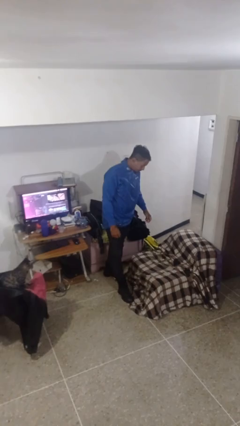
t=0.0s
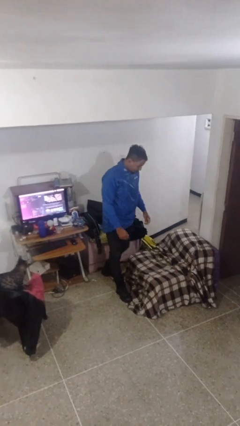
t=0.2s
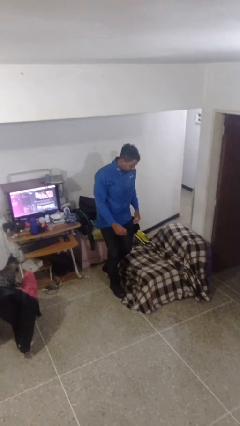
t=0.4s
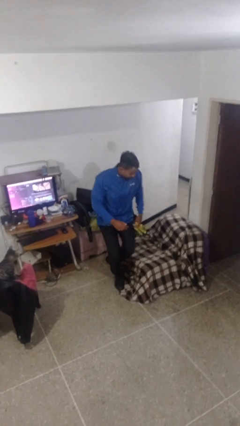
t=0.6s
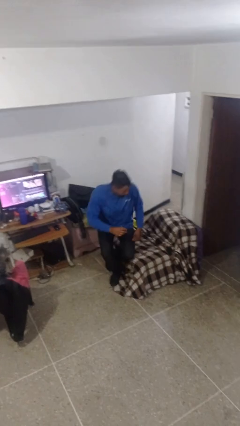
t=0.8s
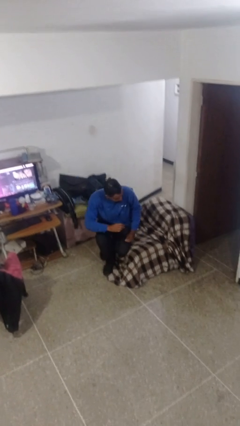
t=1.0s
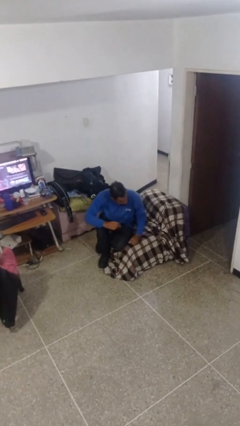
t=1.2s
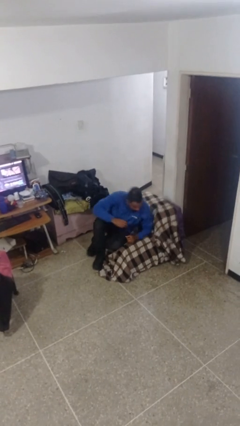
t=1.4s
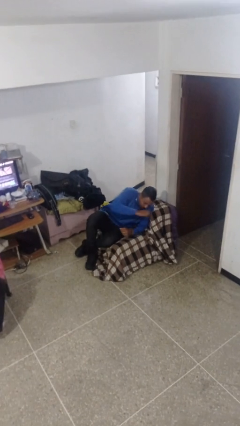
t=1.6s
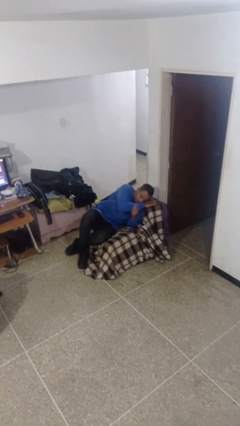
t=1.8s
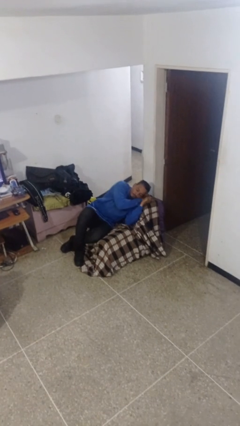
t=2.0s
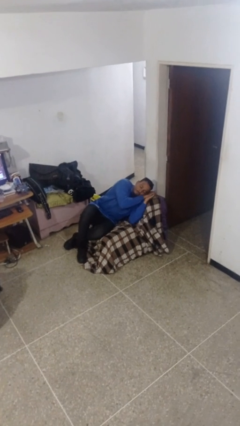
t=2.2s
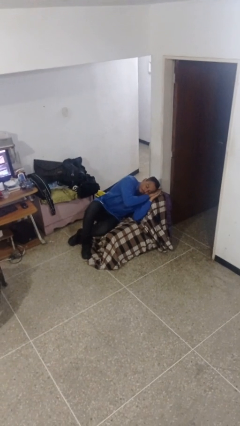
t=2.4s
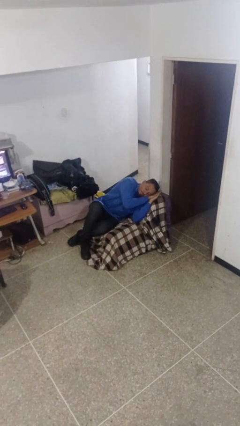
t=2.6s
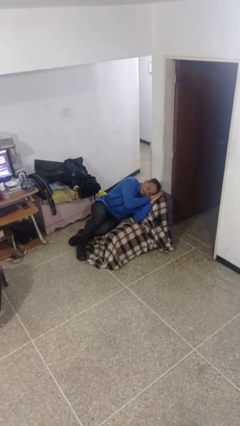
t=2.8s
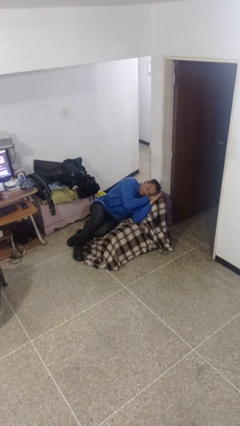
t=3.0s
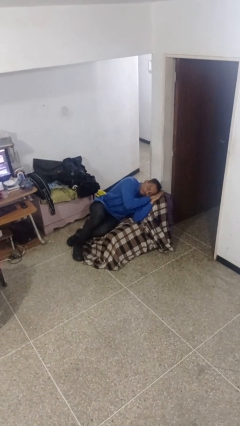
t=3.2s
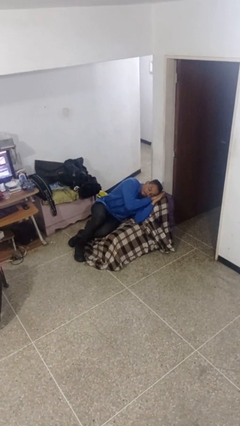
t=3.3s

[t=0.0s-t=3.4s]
person lies down on couch

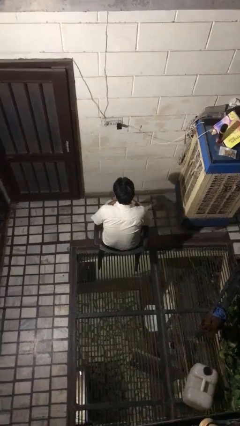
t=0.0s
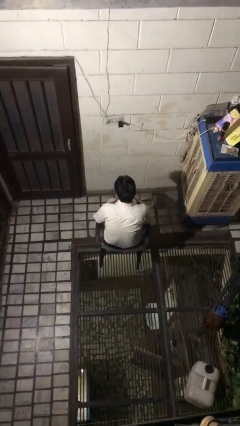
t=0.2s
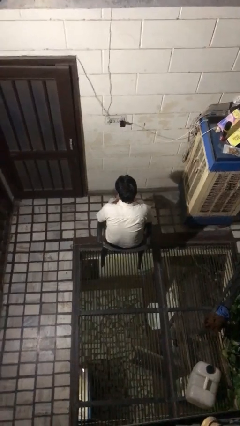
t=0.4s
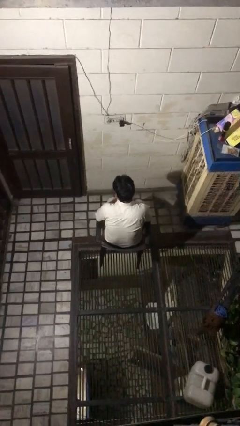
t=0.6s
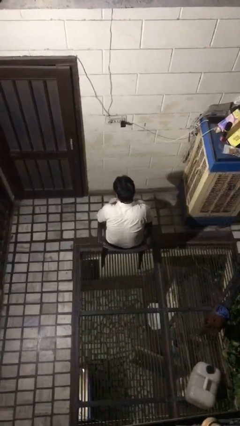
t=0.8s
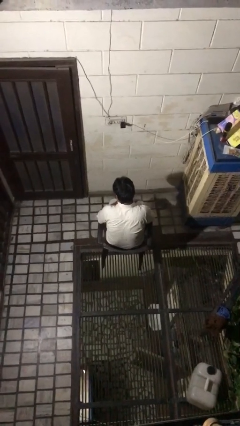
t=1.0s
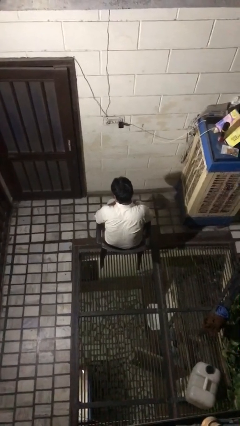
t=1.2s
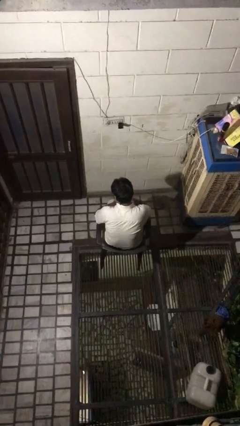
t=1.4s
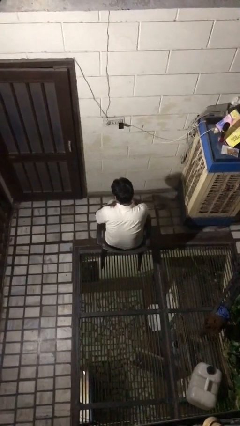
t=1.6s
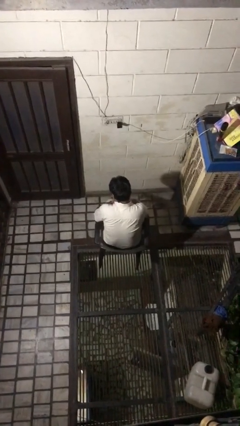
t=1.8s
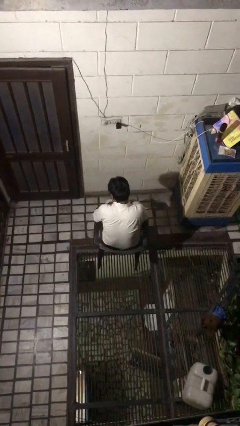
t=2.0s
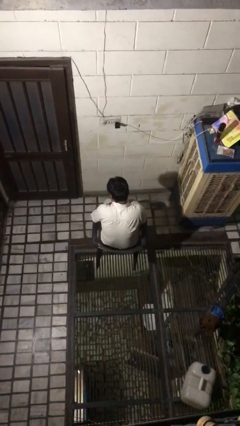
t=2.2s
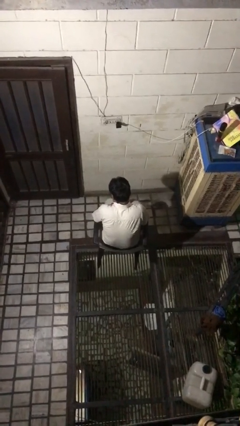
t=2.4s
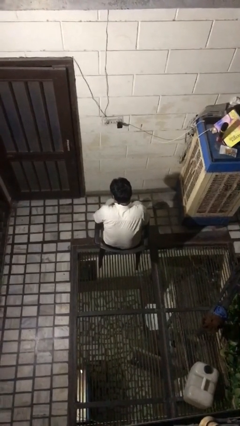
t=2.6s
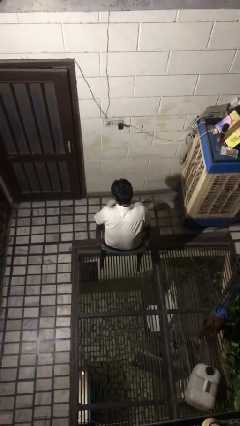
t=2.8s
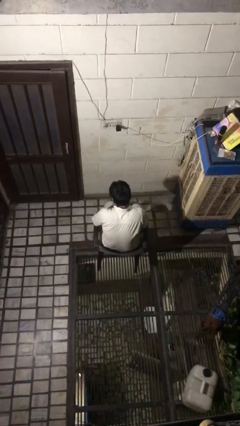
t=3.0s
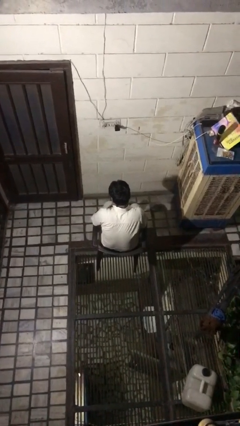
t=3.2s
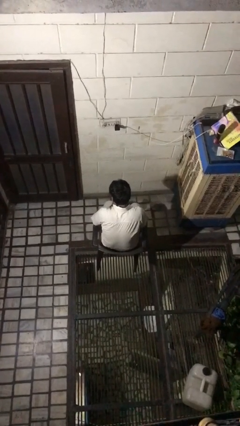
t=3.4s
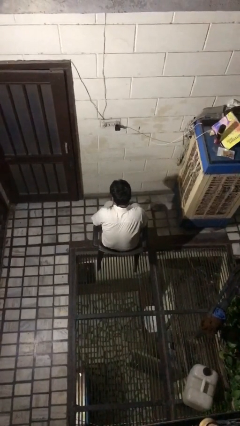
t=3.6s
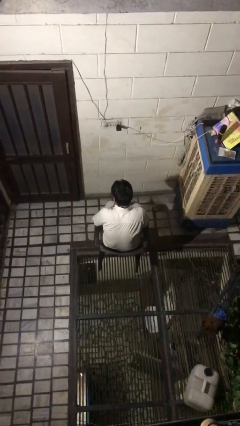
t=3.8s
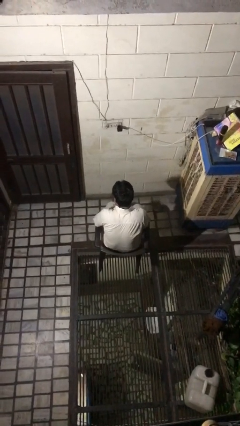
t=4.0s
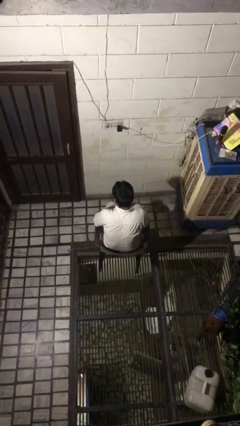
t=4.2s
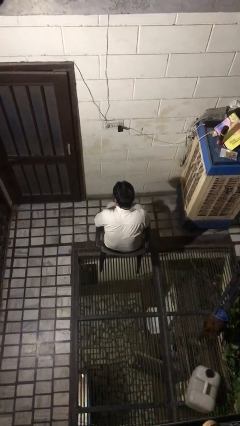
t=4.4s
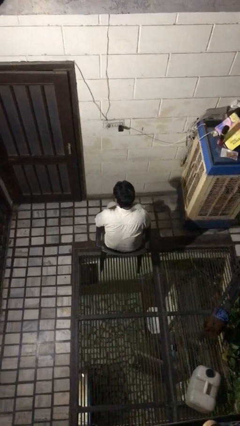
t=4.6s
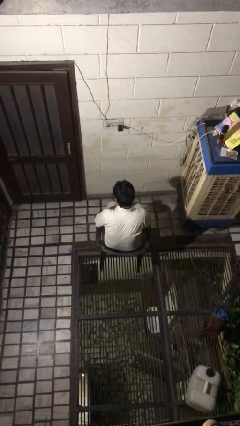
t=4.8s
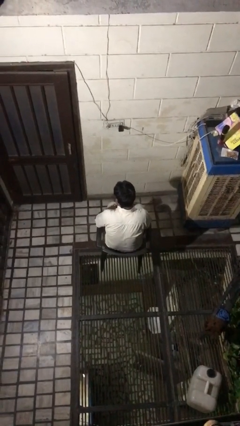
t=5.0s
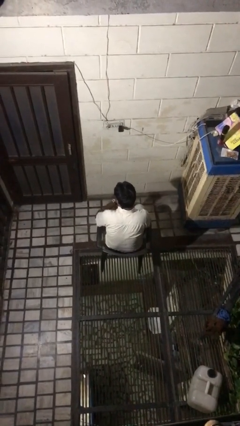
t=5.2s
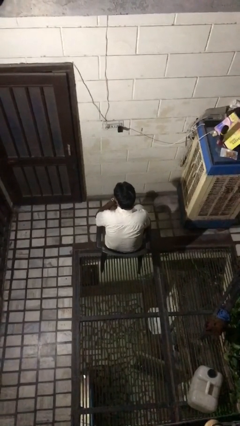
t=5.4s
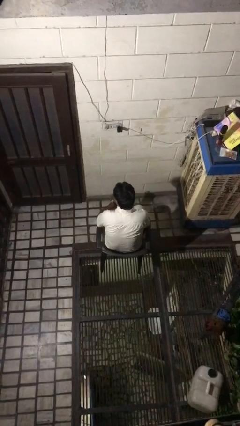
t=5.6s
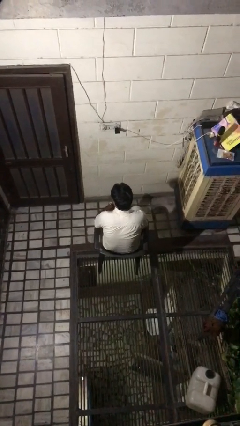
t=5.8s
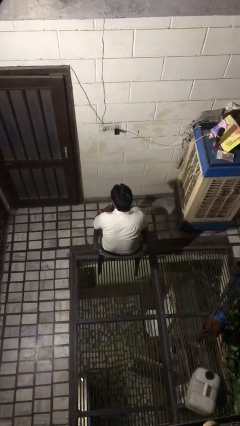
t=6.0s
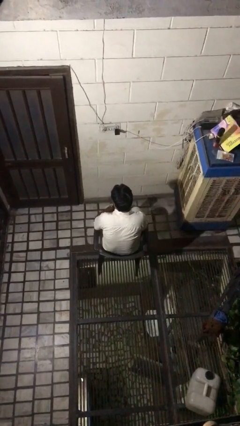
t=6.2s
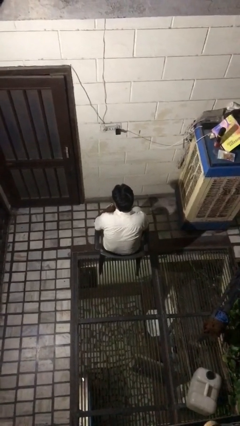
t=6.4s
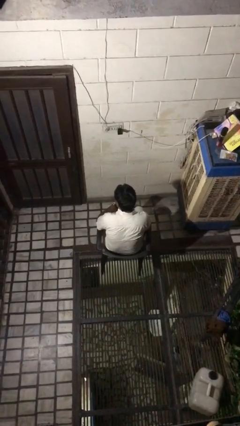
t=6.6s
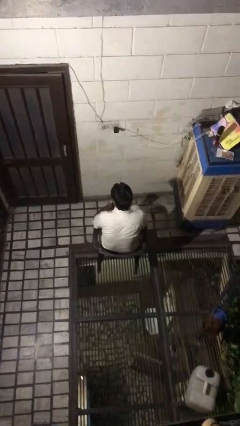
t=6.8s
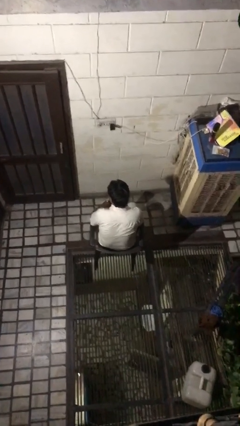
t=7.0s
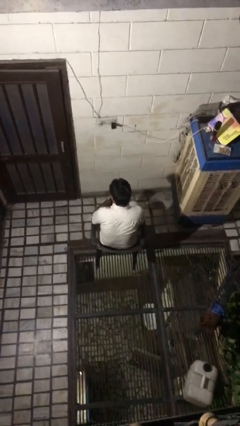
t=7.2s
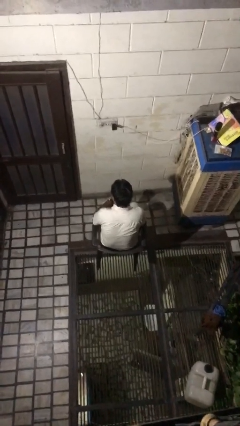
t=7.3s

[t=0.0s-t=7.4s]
person puts on wristwatch

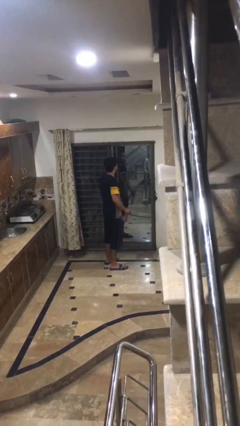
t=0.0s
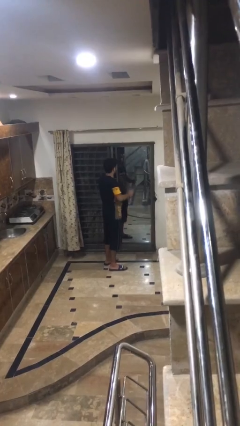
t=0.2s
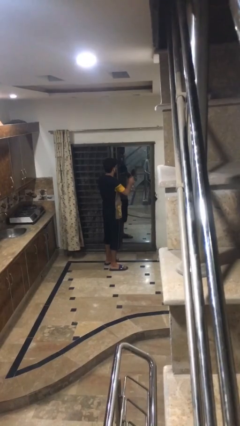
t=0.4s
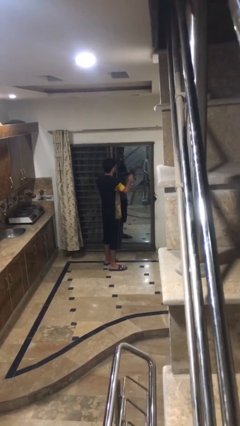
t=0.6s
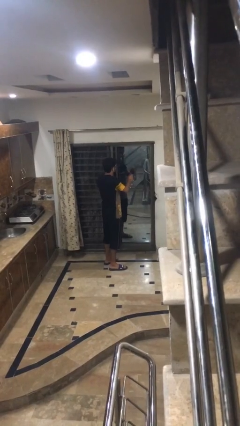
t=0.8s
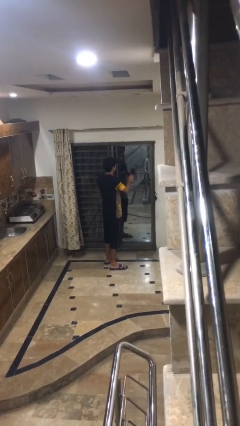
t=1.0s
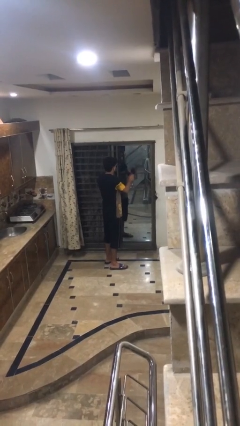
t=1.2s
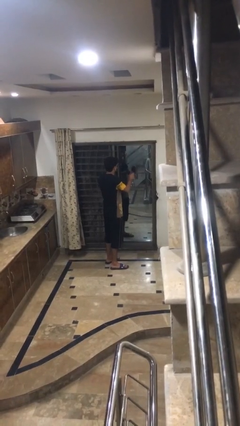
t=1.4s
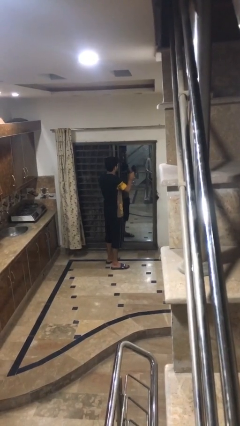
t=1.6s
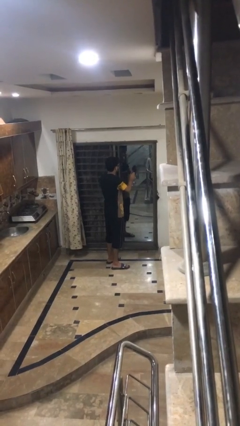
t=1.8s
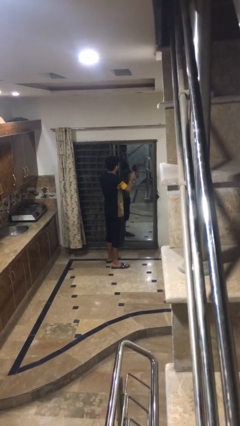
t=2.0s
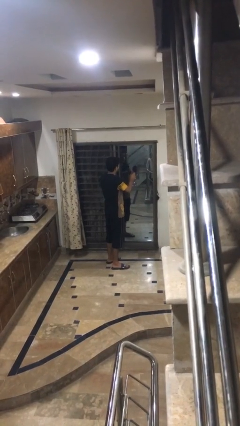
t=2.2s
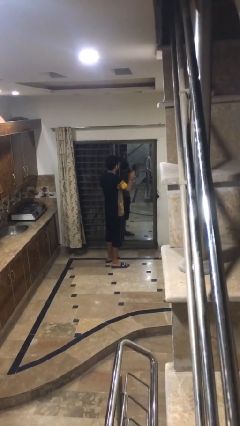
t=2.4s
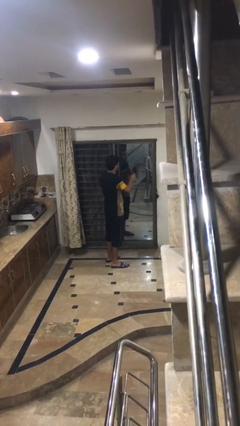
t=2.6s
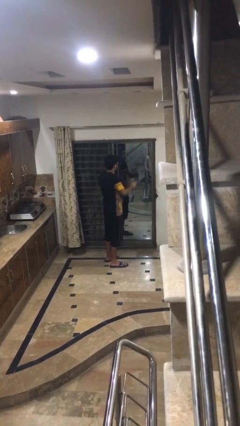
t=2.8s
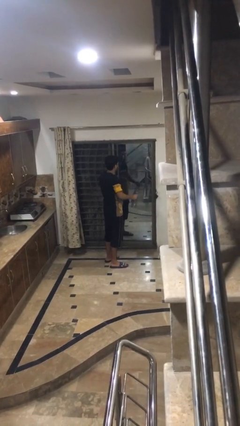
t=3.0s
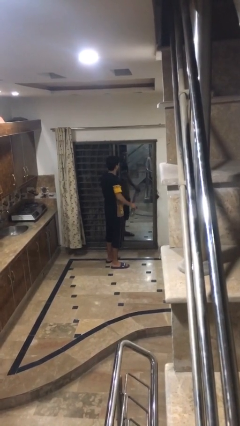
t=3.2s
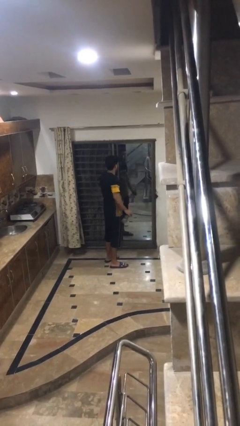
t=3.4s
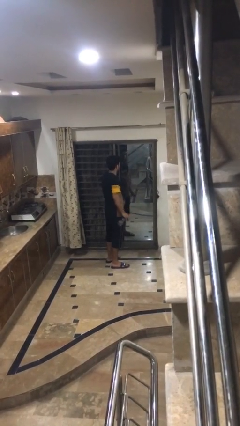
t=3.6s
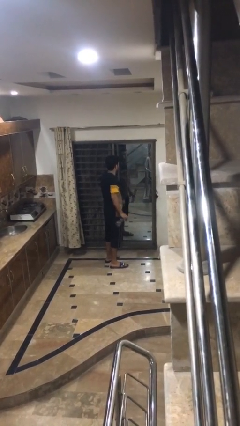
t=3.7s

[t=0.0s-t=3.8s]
person sprays from bottle

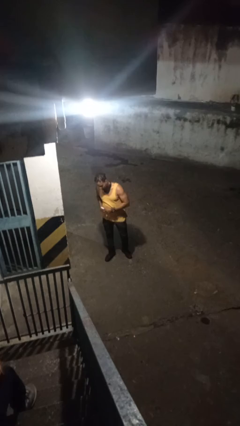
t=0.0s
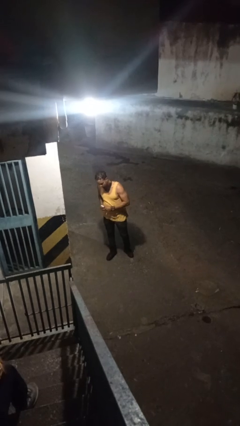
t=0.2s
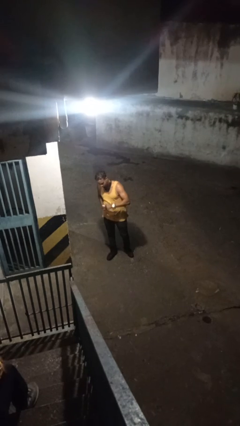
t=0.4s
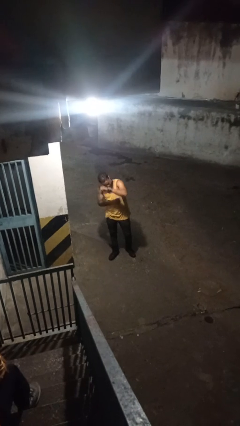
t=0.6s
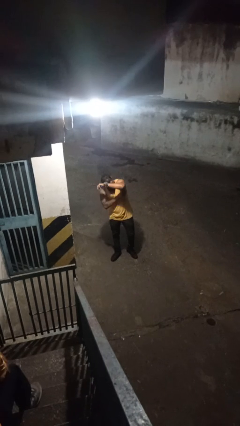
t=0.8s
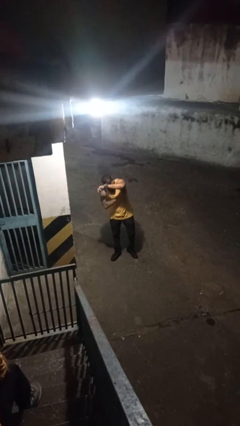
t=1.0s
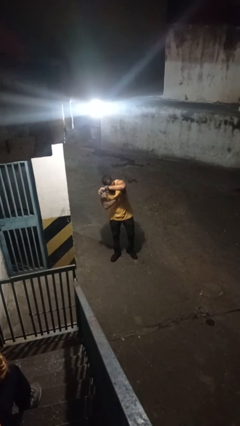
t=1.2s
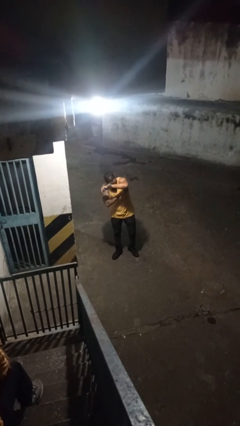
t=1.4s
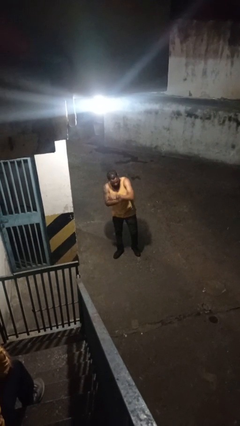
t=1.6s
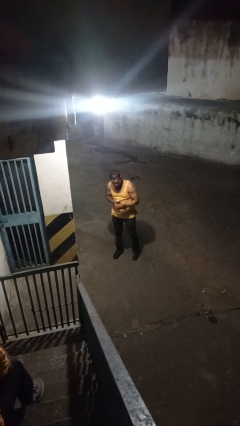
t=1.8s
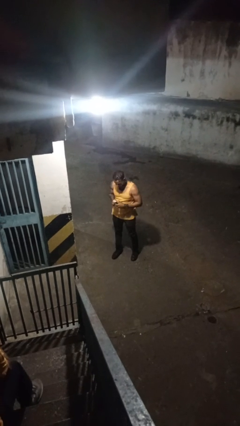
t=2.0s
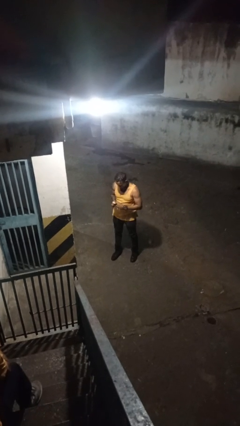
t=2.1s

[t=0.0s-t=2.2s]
person applies deodorant

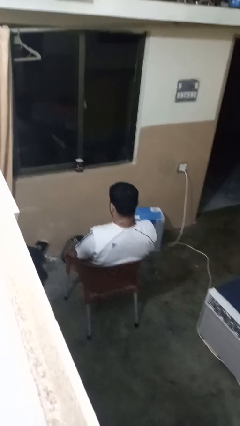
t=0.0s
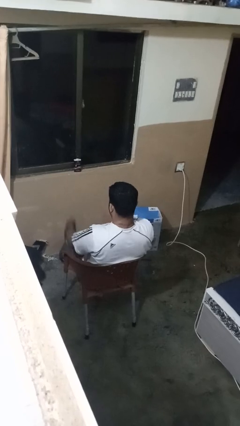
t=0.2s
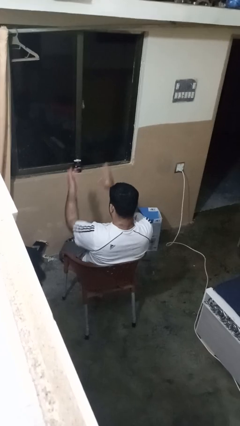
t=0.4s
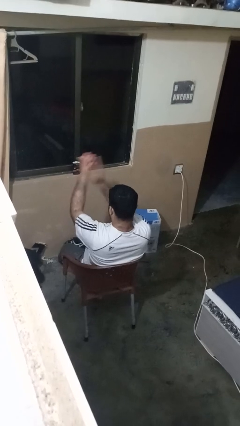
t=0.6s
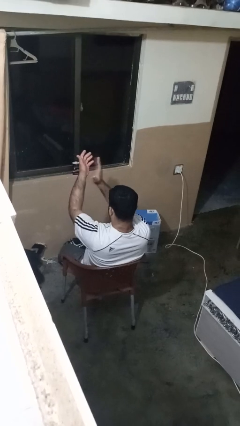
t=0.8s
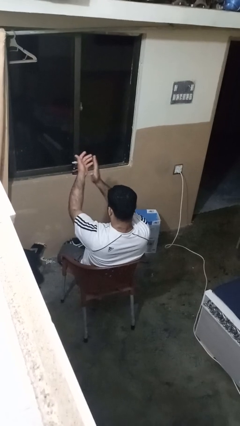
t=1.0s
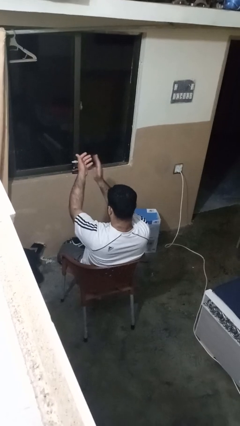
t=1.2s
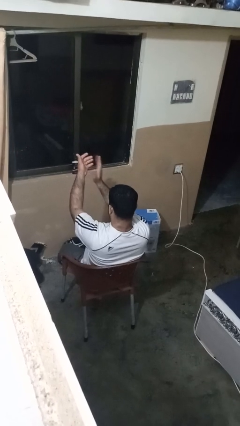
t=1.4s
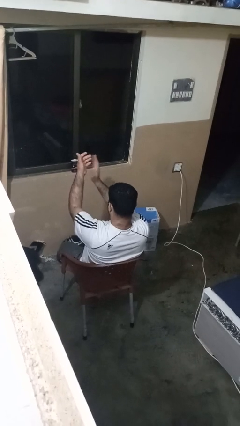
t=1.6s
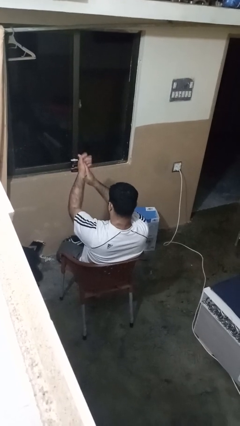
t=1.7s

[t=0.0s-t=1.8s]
person claps hands
